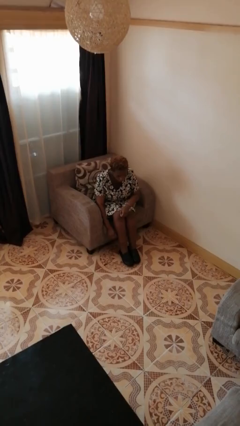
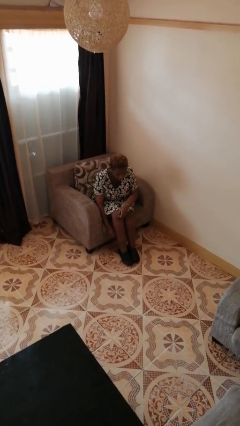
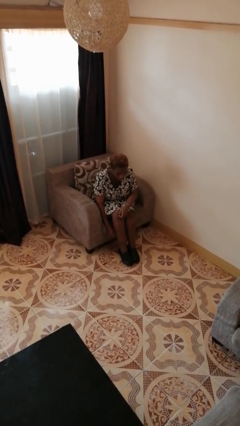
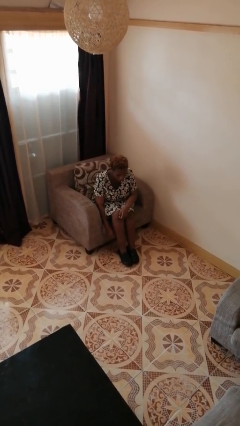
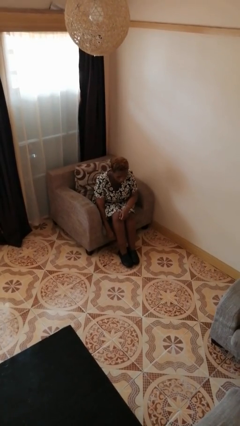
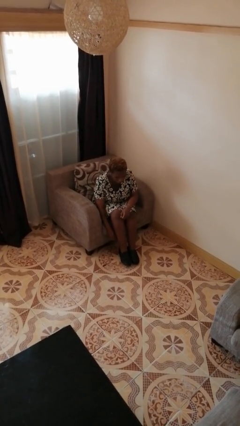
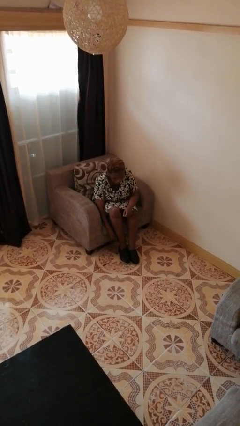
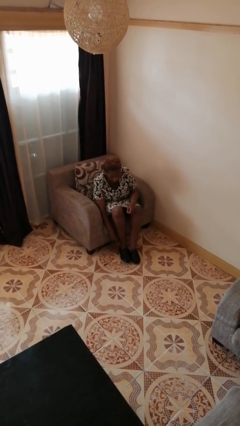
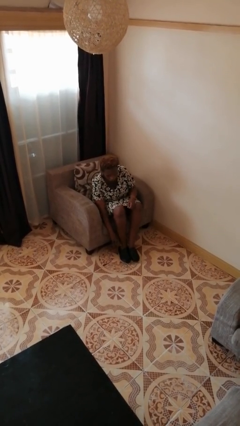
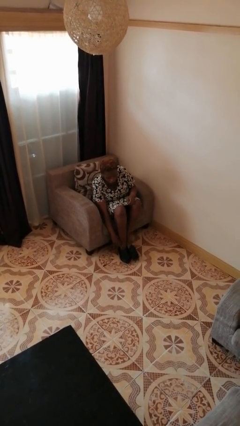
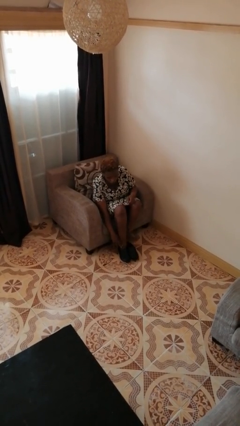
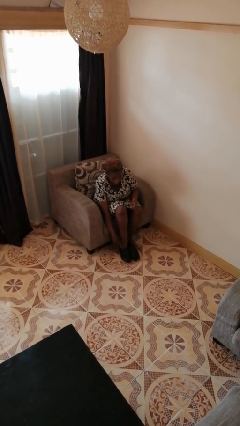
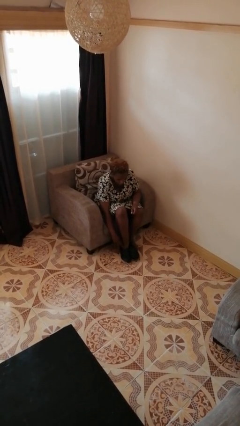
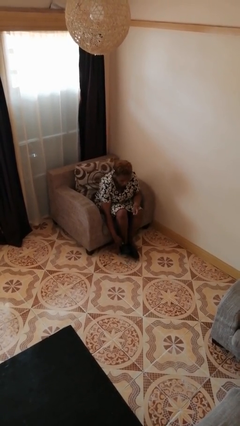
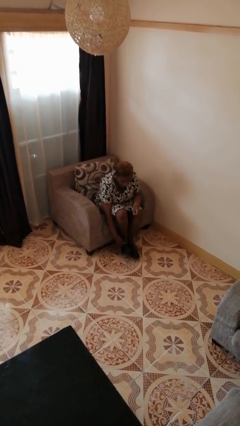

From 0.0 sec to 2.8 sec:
person takes off shoes

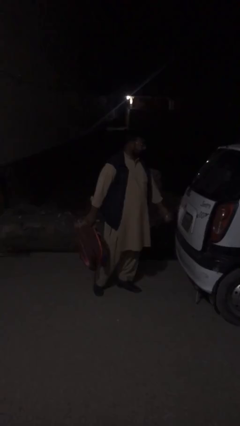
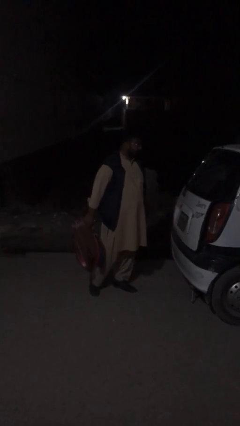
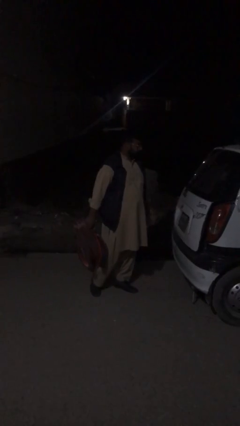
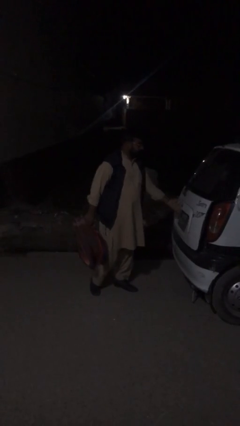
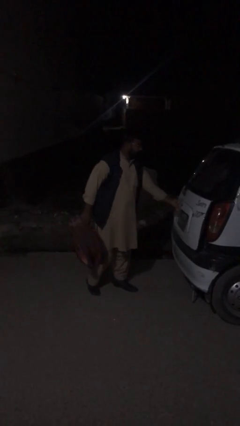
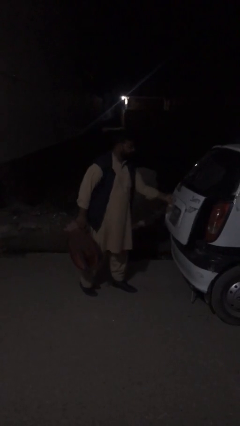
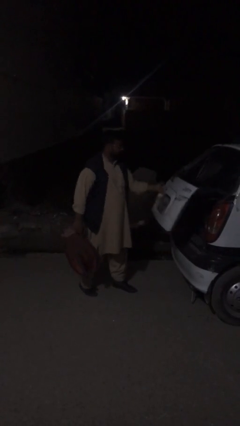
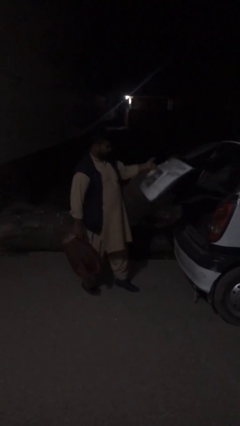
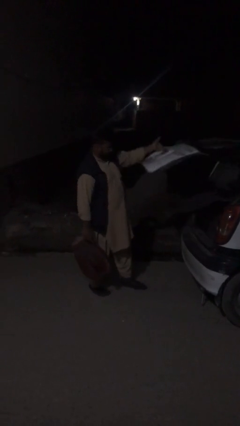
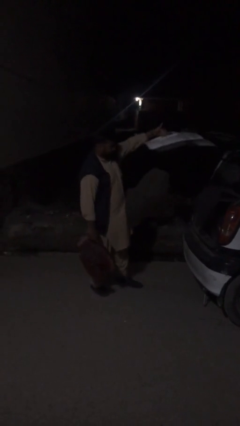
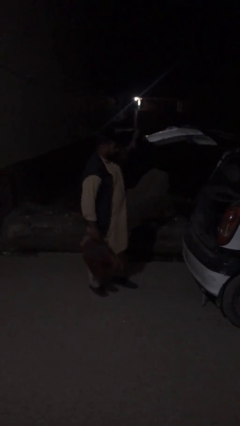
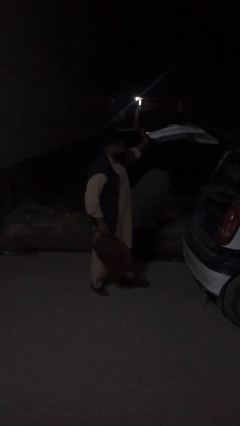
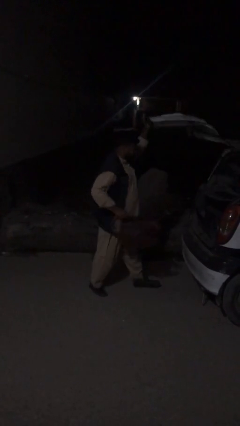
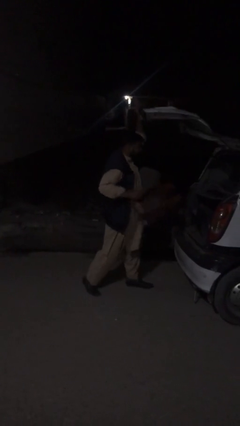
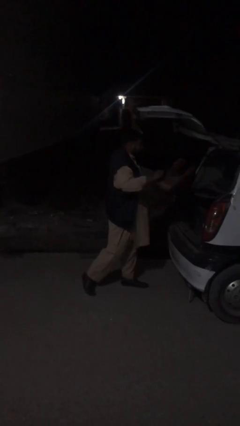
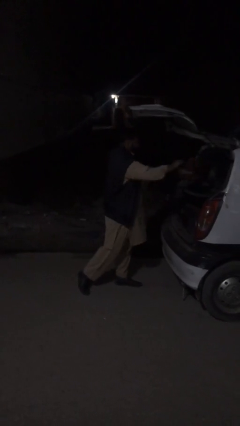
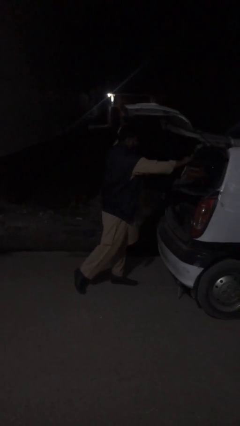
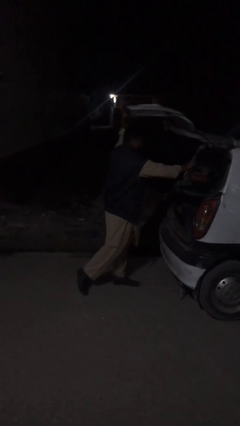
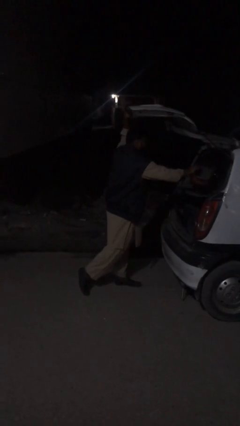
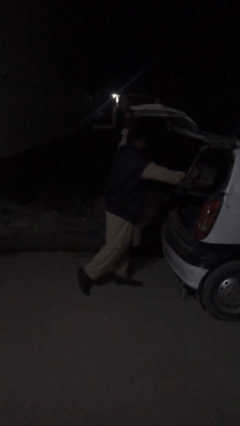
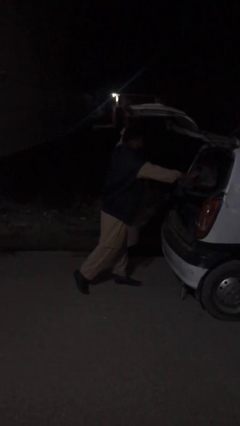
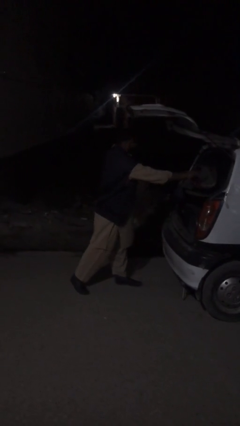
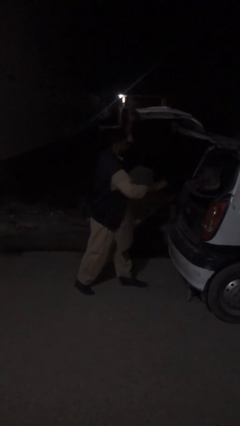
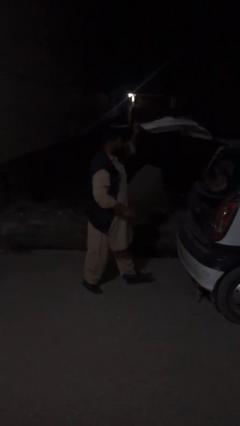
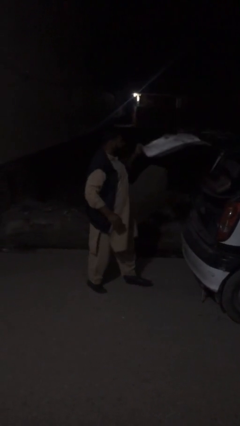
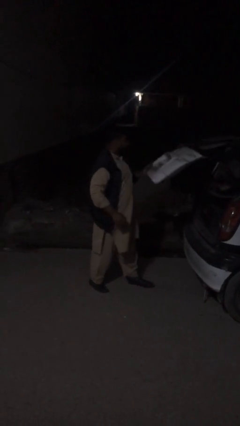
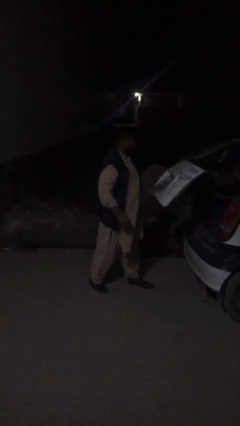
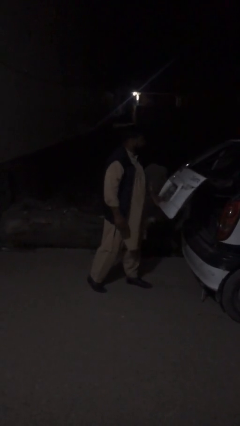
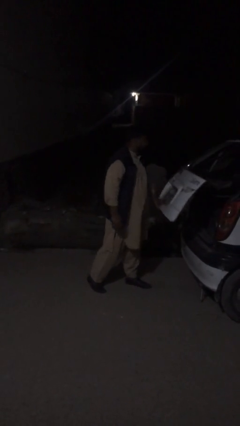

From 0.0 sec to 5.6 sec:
person loads car

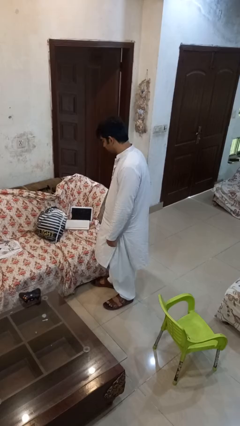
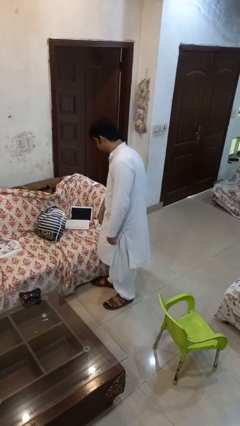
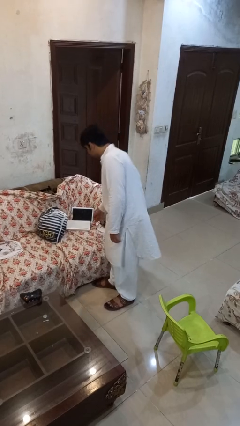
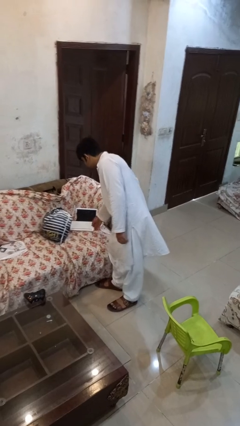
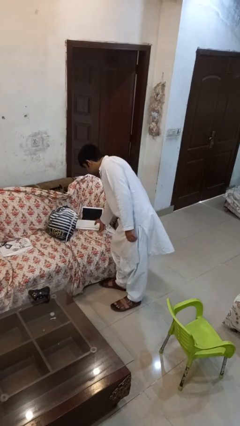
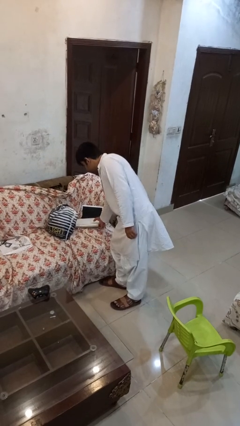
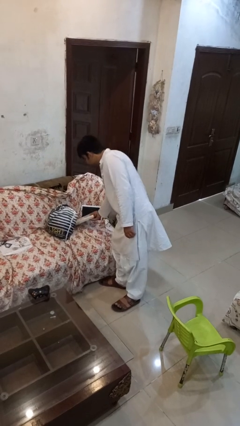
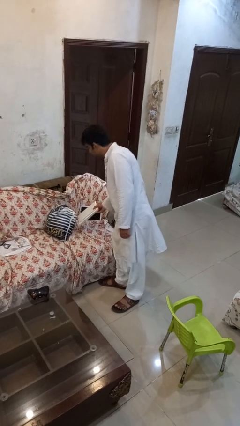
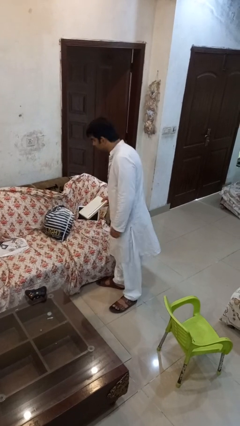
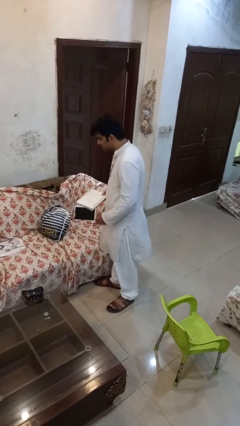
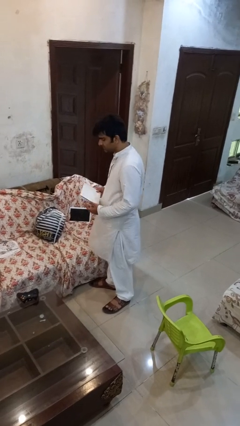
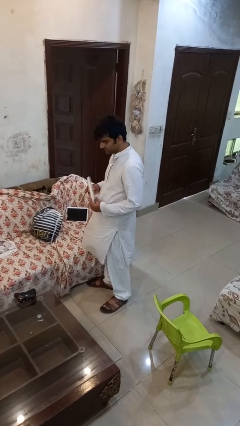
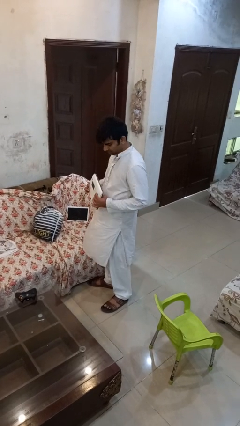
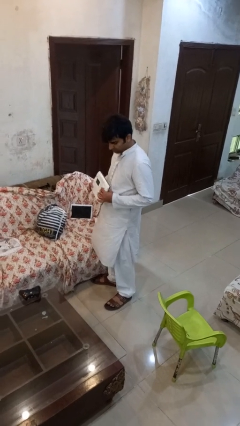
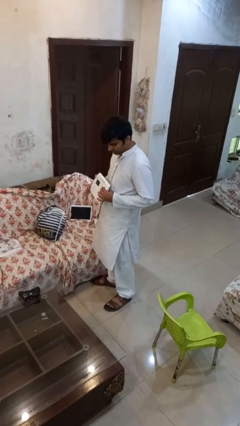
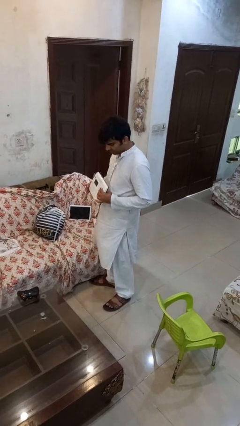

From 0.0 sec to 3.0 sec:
person picks up object from couch

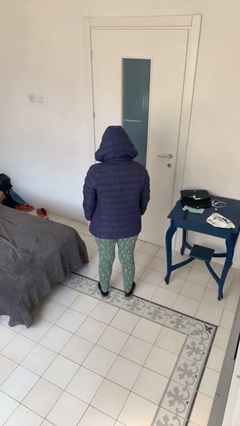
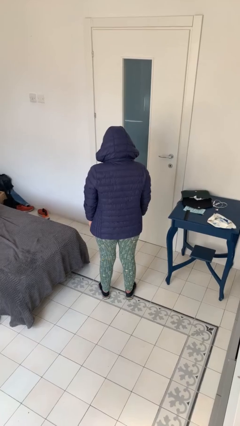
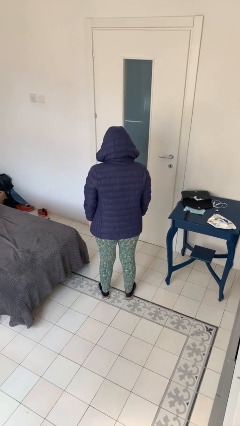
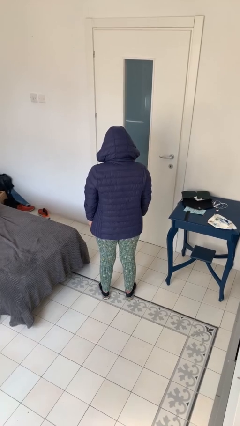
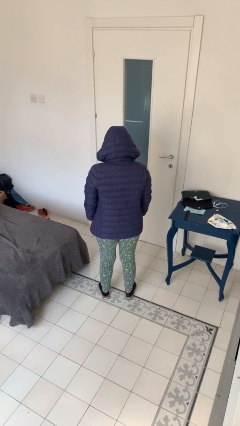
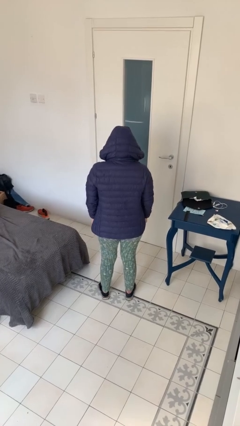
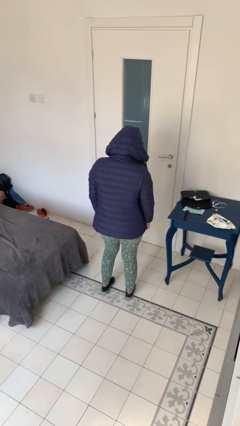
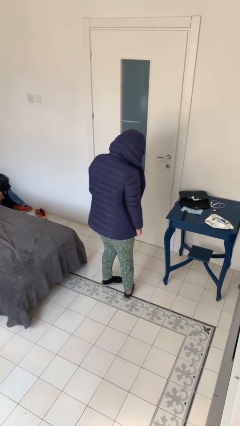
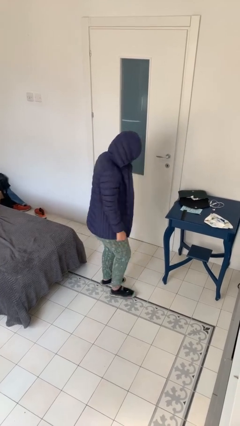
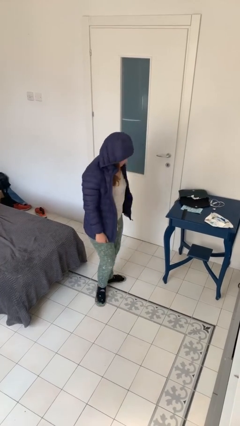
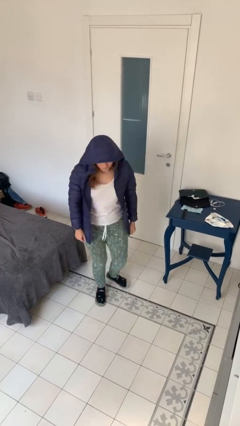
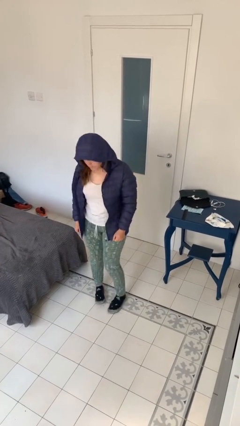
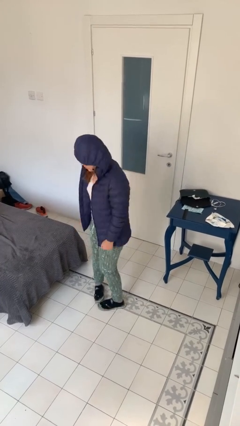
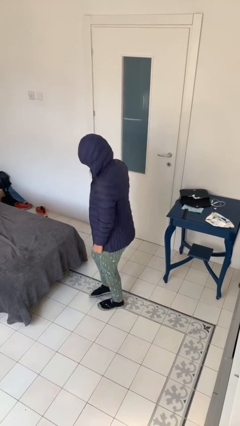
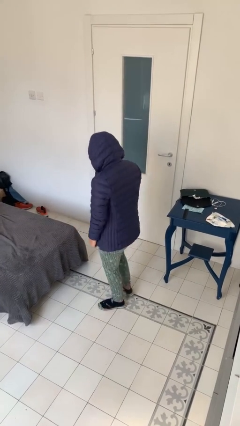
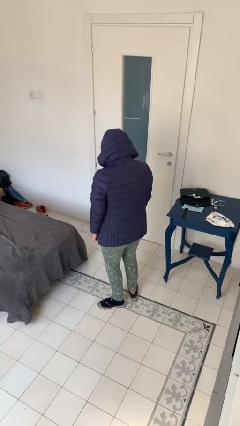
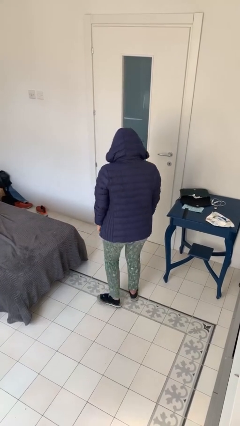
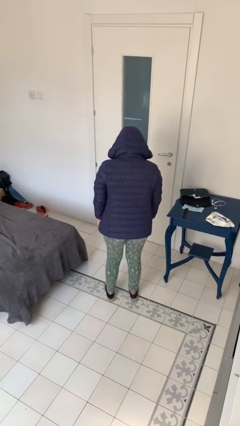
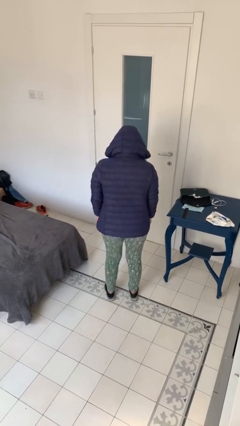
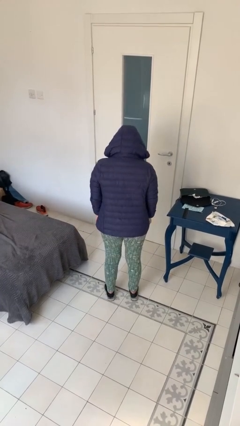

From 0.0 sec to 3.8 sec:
person twirls

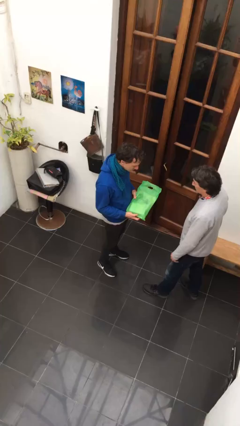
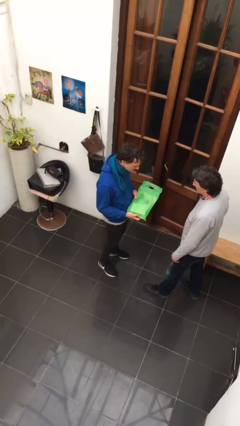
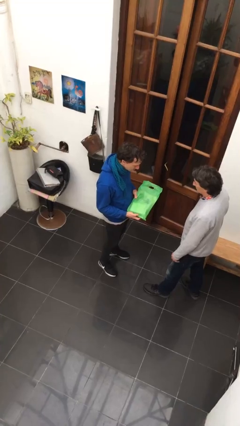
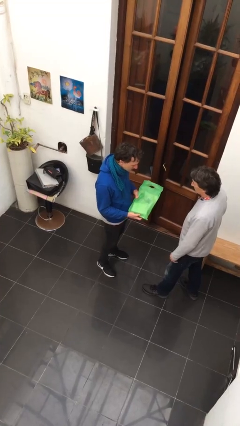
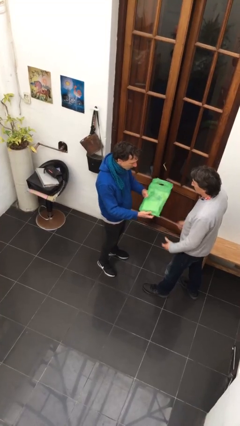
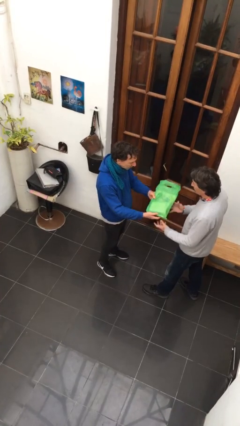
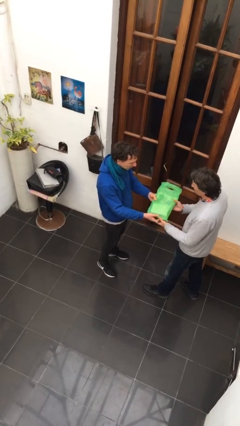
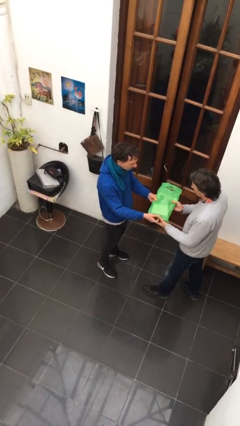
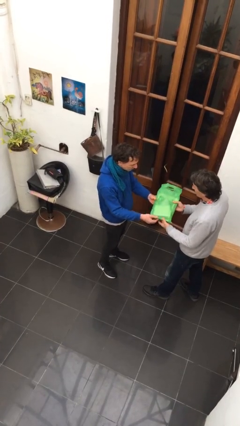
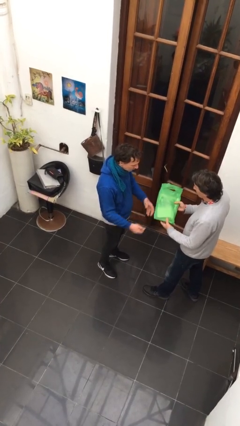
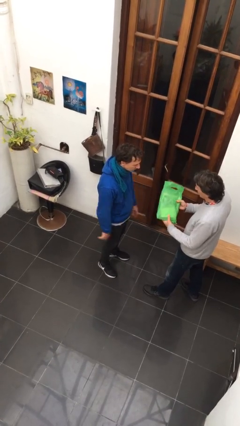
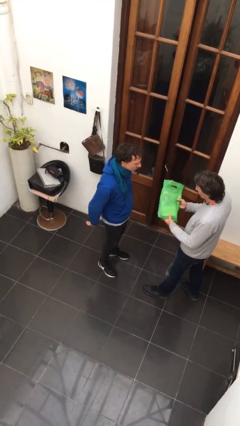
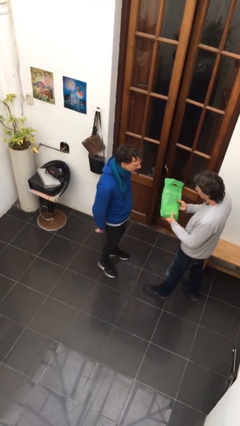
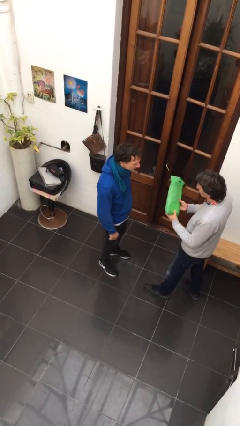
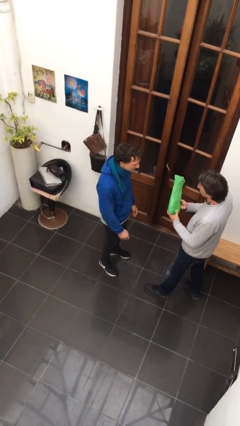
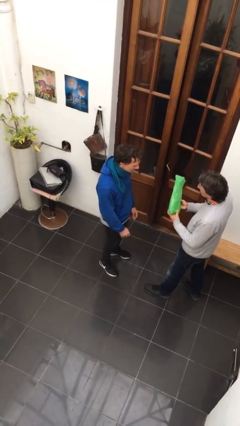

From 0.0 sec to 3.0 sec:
person transfers object to person
